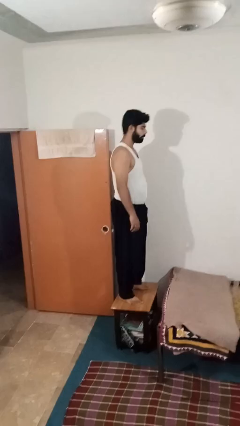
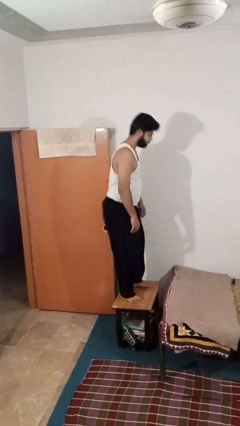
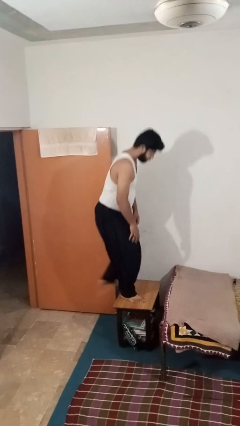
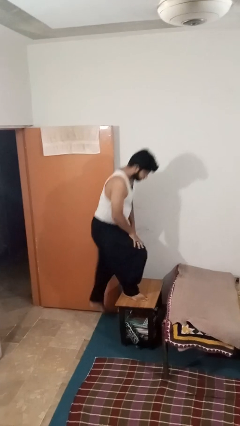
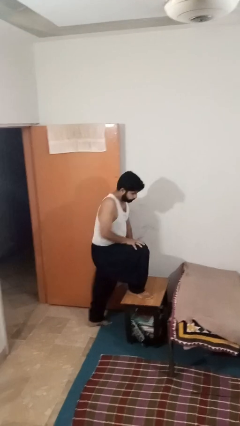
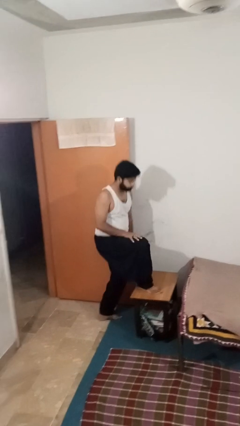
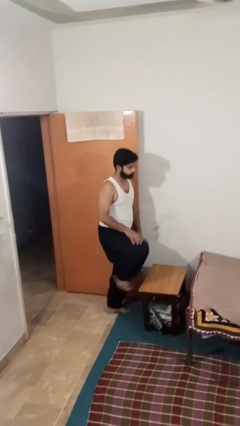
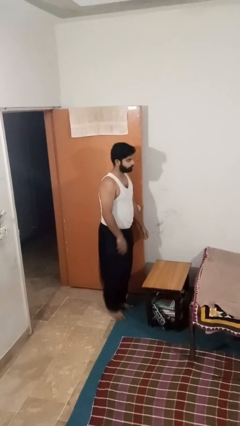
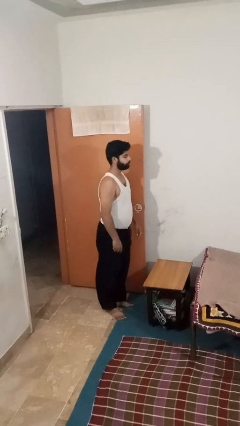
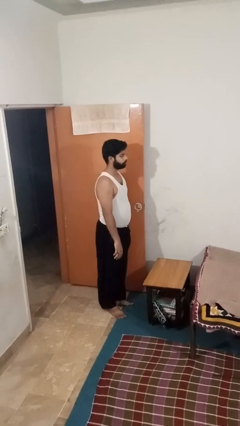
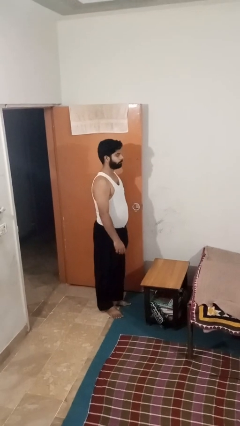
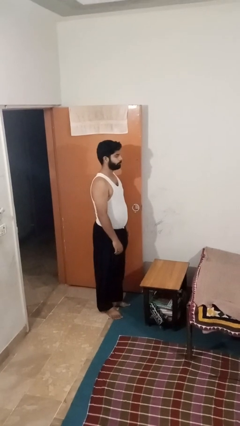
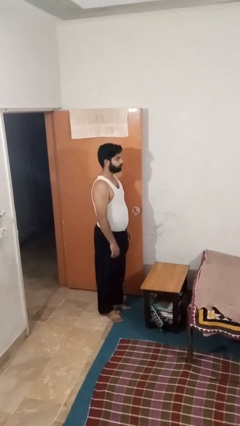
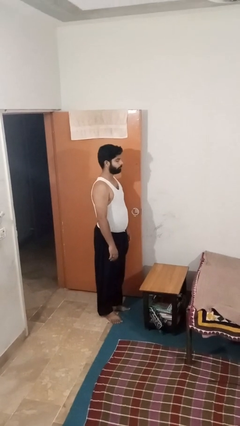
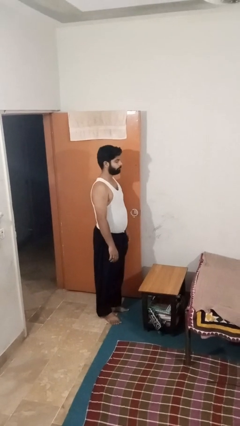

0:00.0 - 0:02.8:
person climbs off table

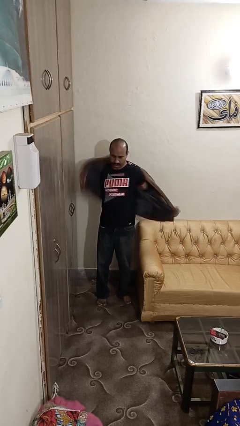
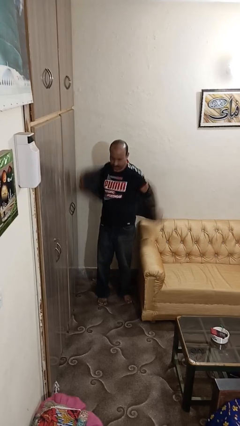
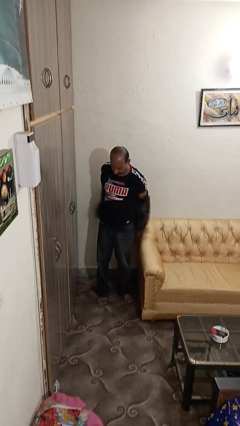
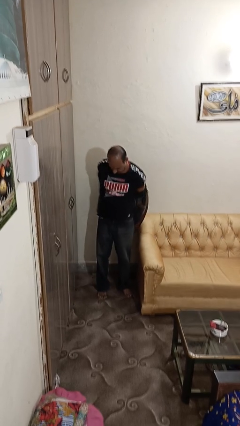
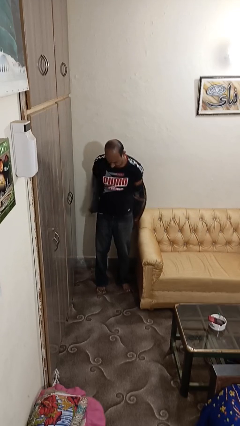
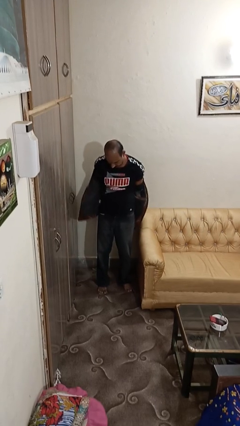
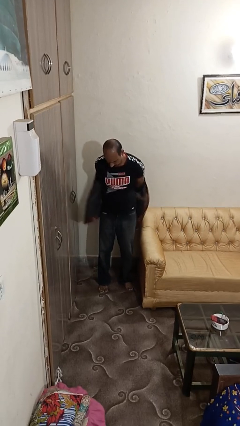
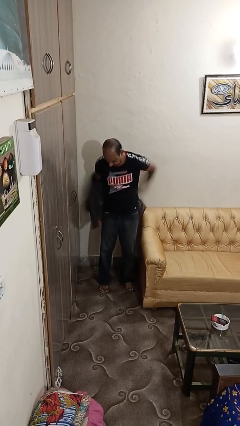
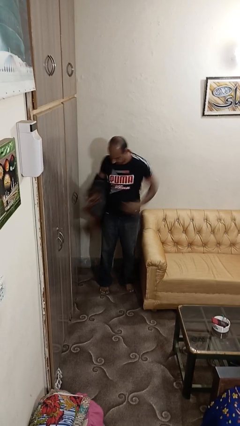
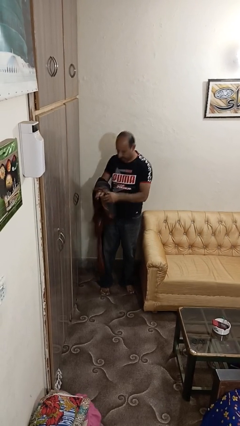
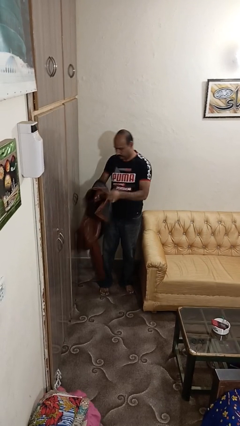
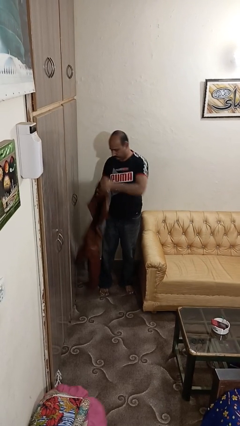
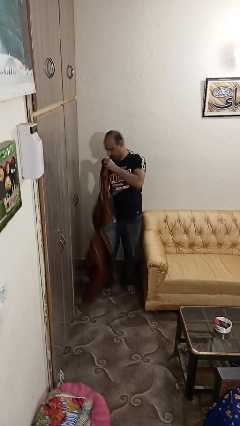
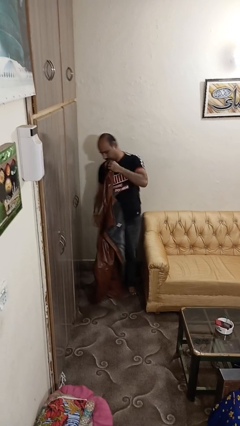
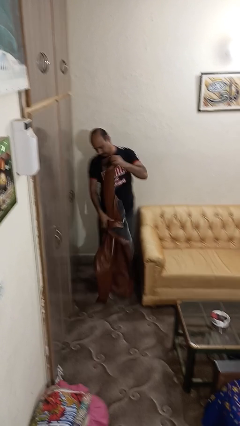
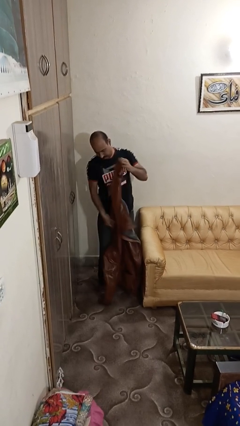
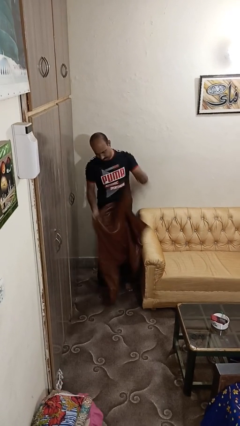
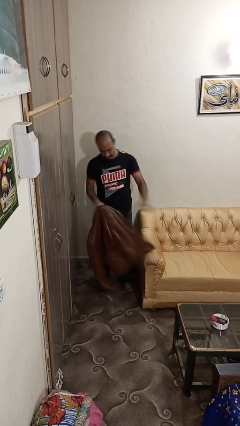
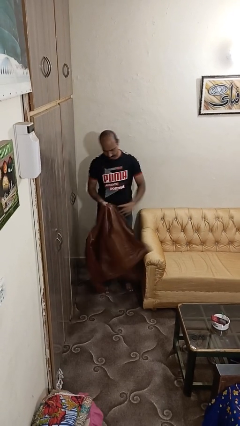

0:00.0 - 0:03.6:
person takes off jacket

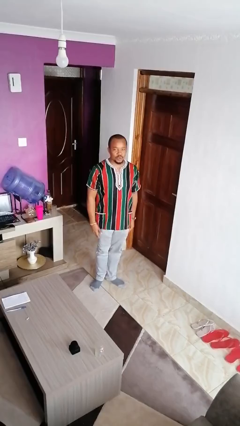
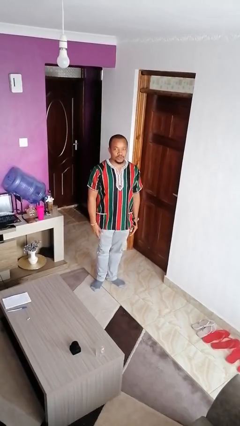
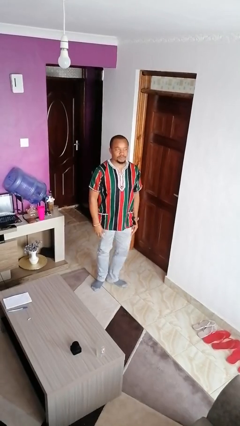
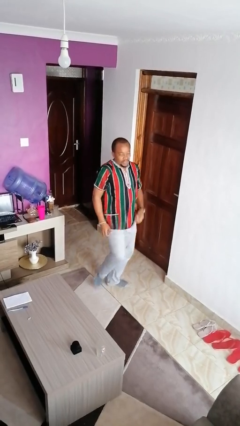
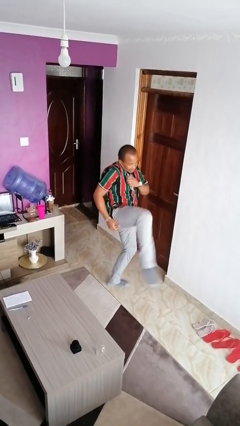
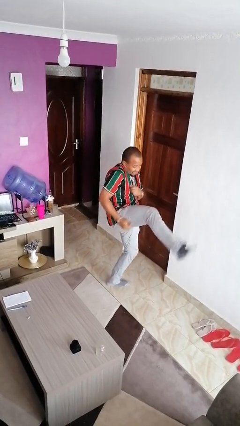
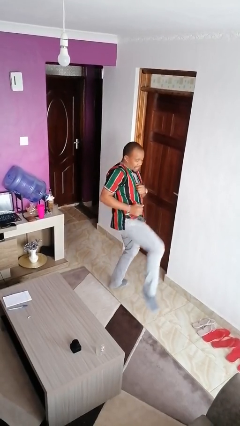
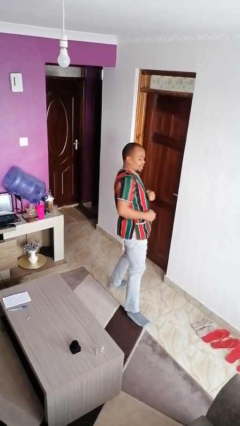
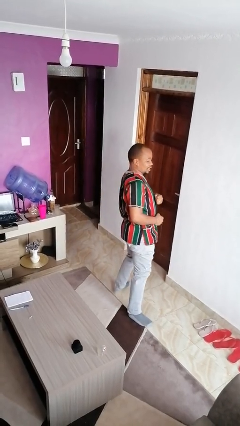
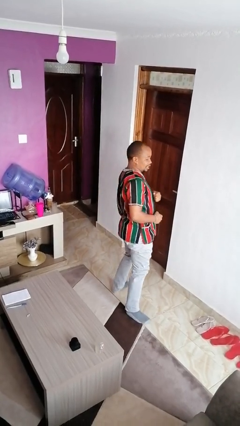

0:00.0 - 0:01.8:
person karate kicks

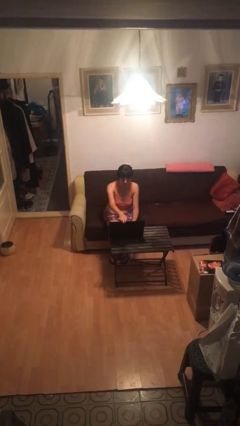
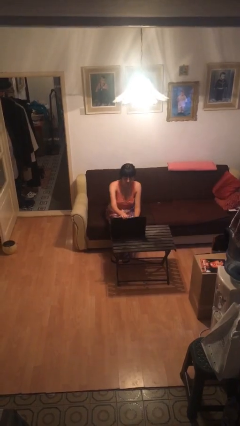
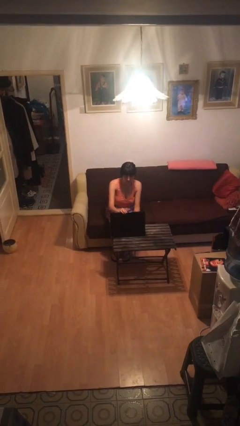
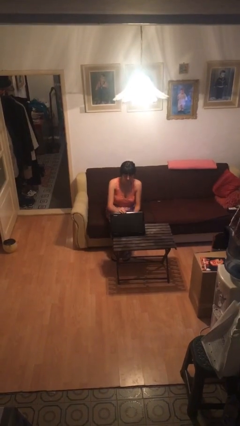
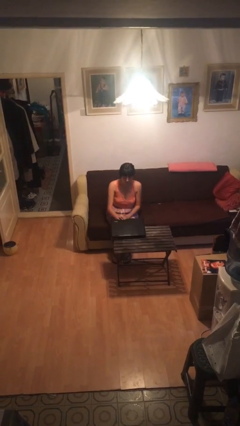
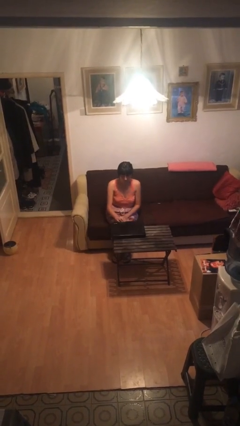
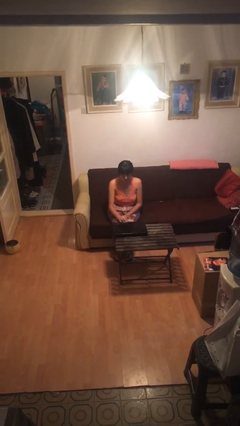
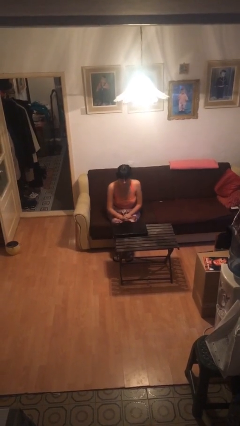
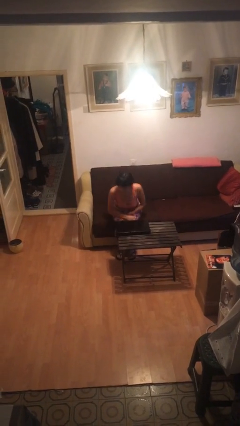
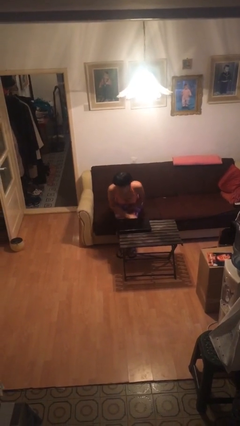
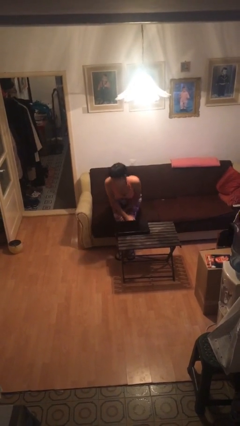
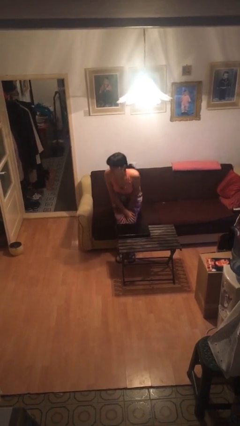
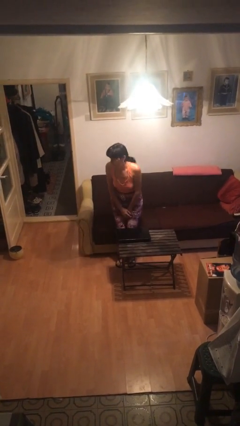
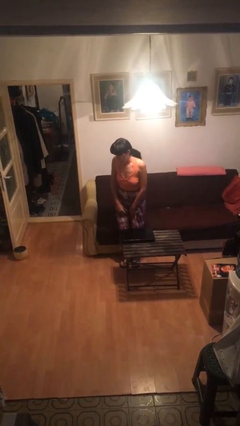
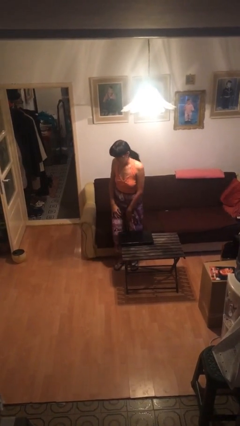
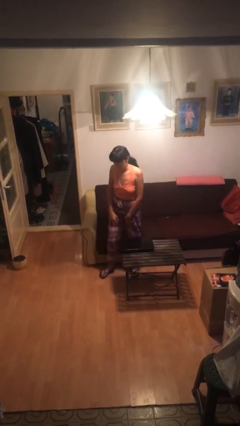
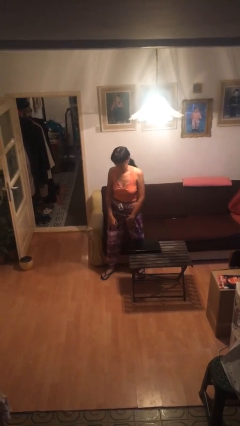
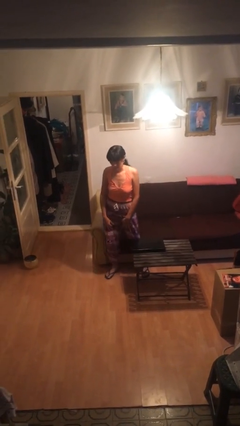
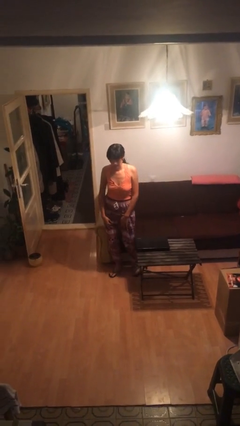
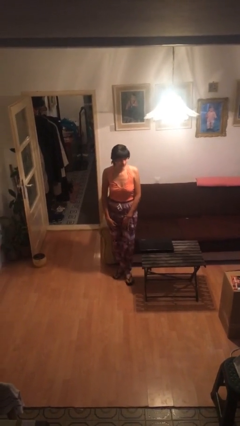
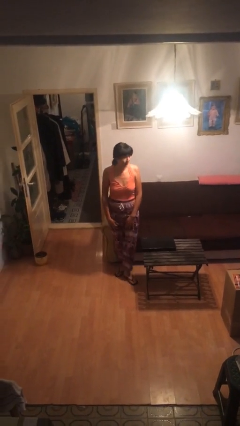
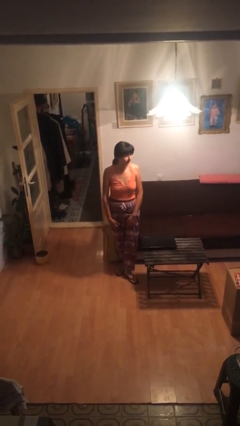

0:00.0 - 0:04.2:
person stands up

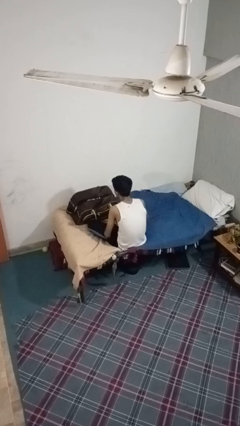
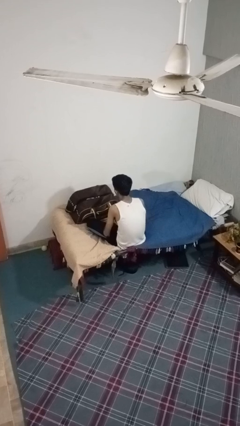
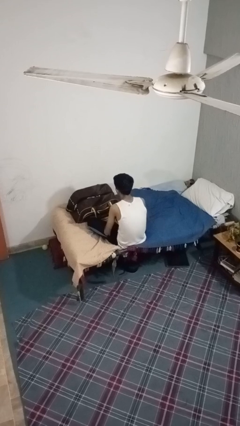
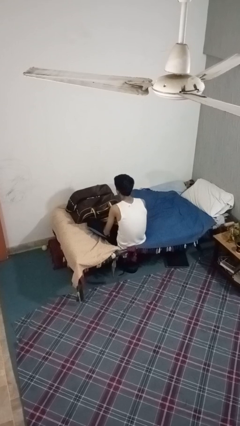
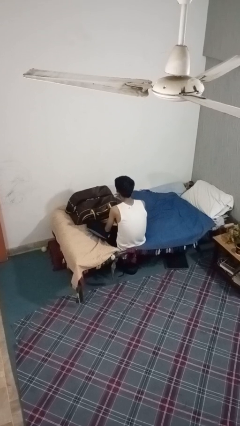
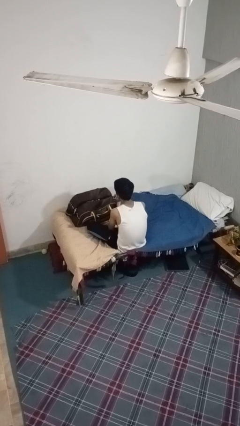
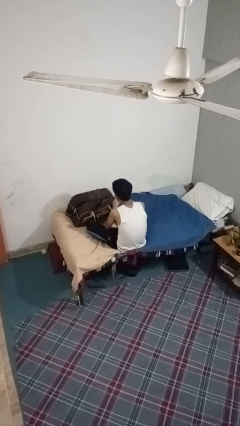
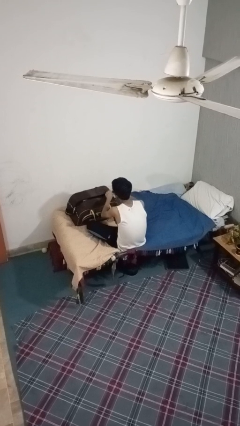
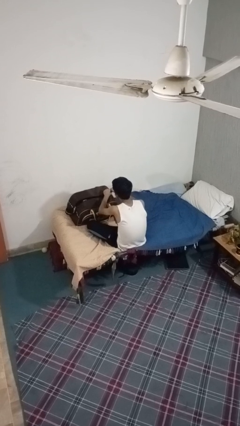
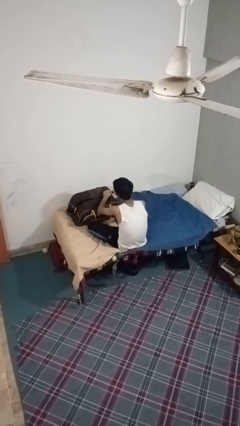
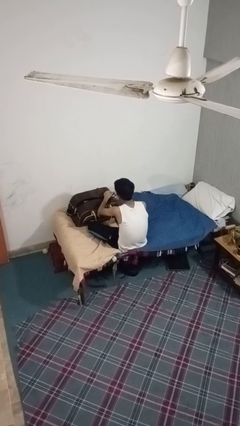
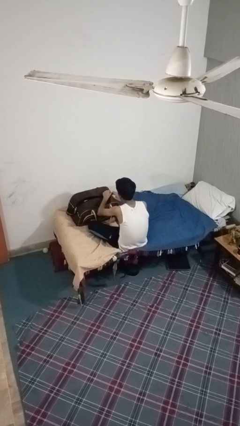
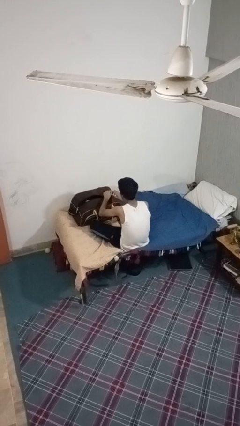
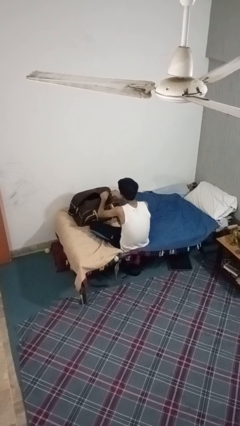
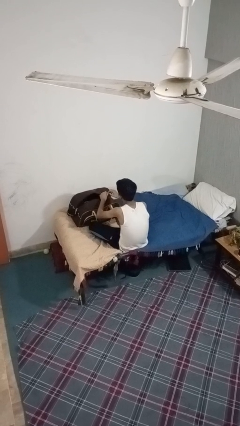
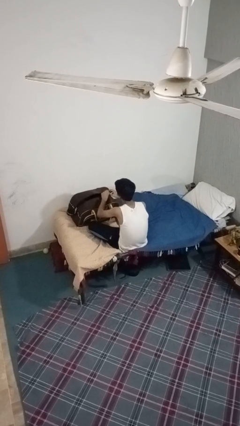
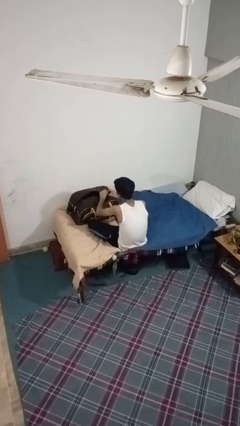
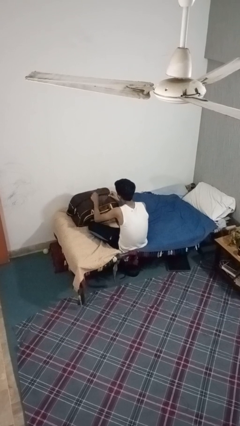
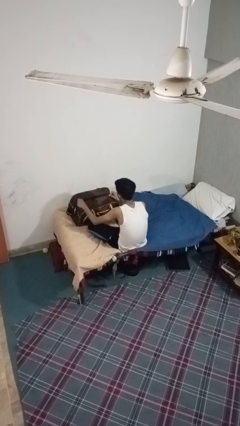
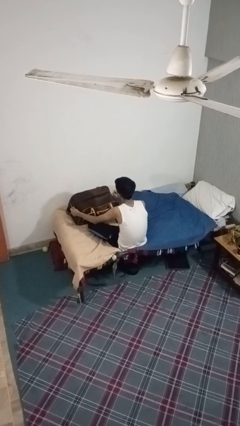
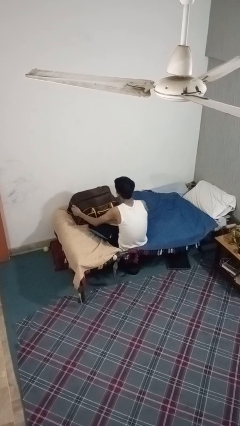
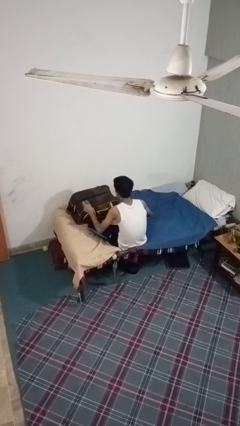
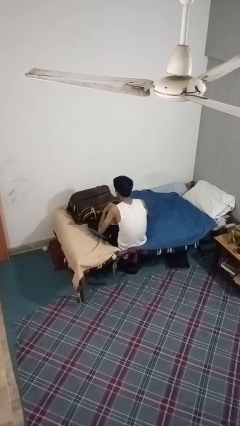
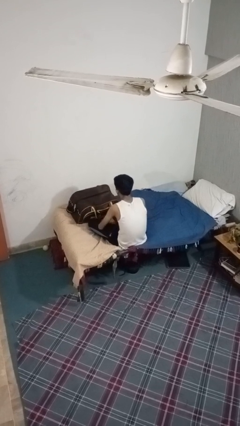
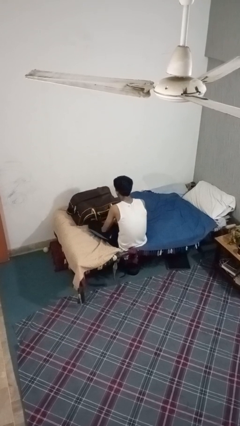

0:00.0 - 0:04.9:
person closes suitcase
